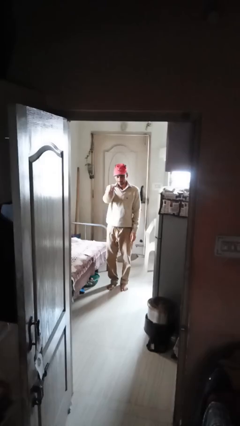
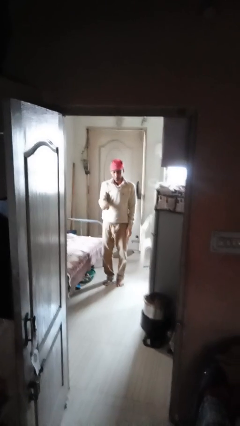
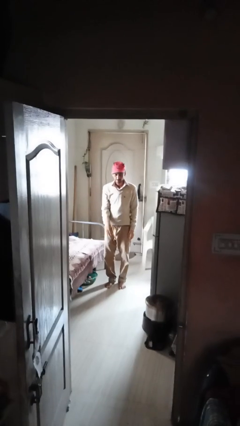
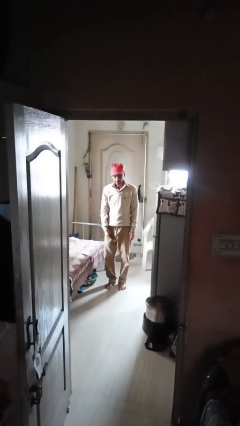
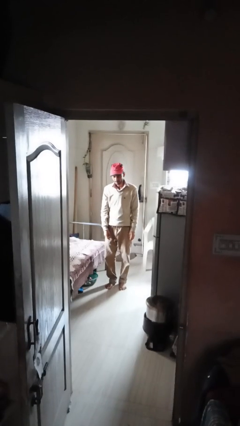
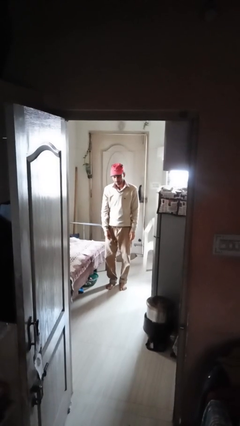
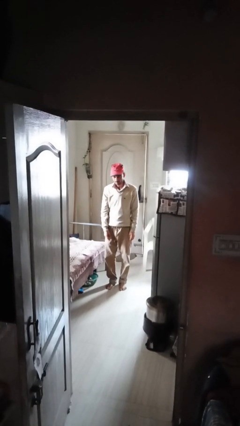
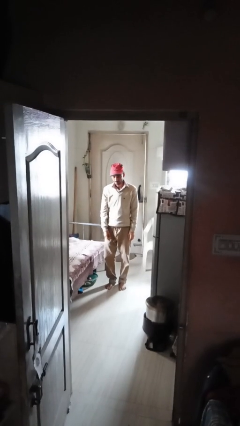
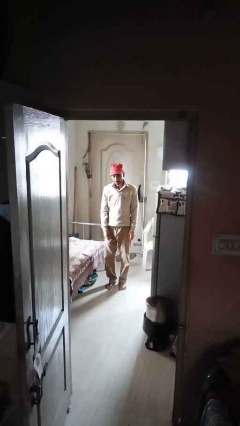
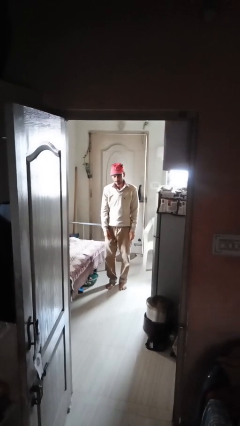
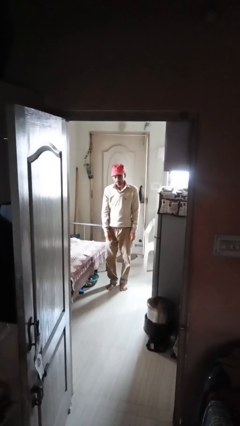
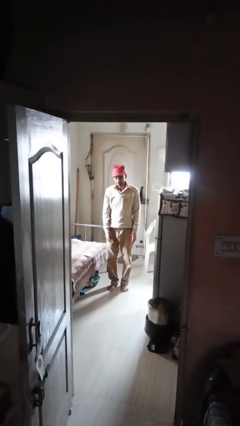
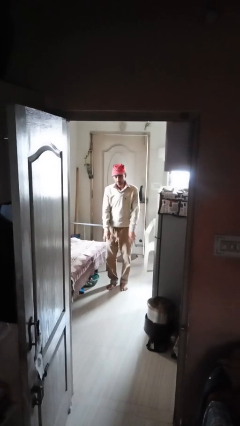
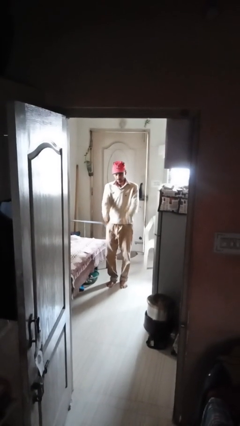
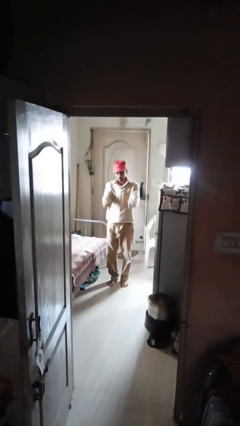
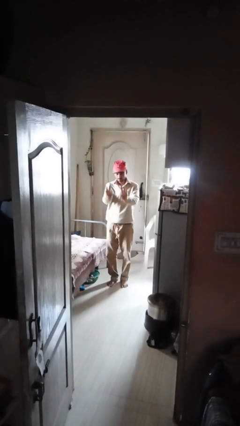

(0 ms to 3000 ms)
person gestures peace

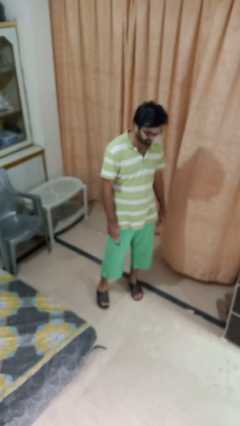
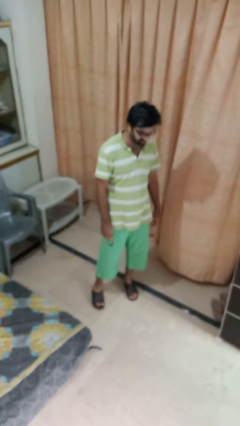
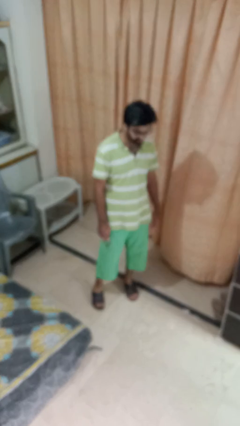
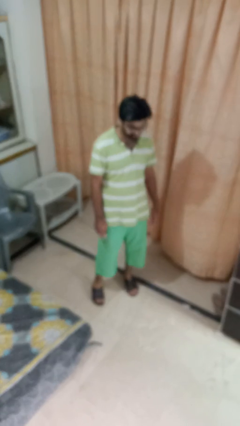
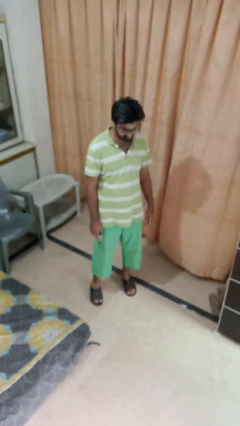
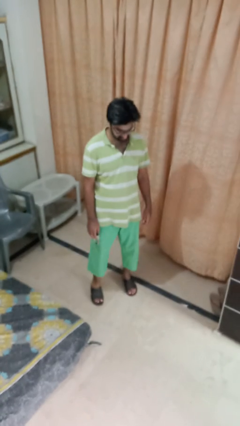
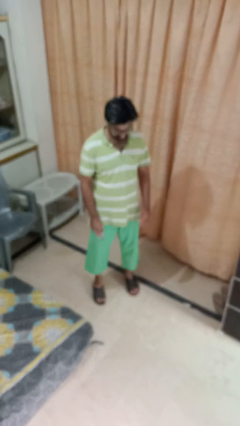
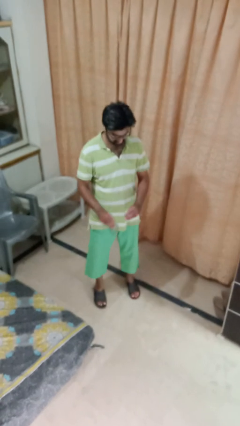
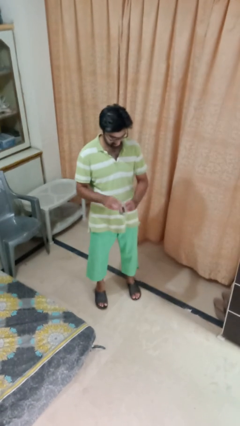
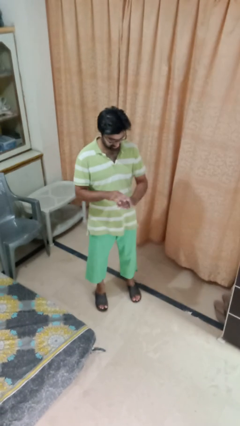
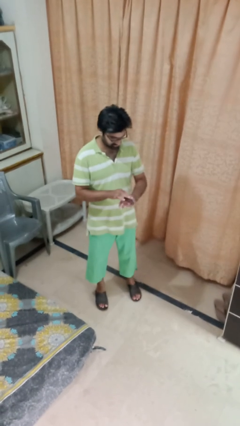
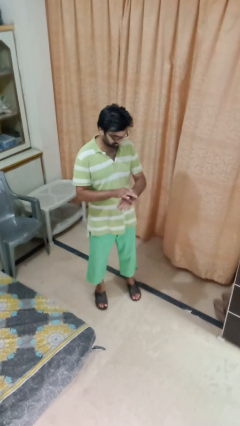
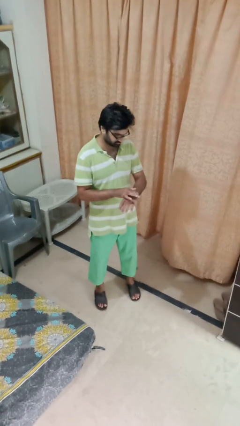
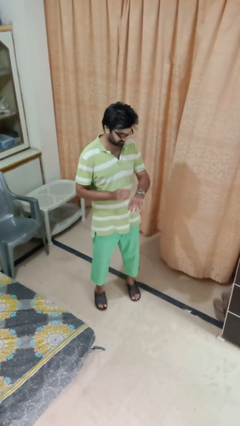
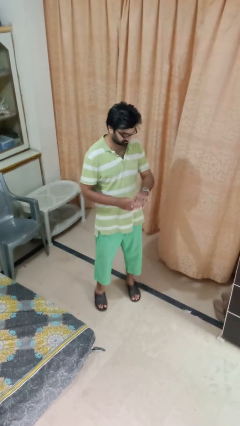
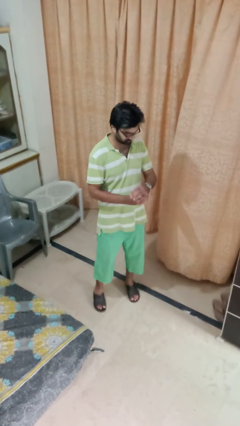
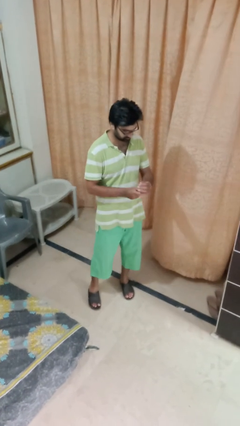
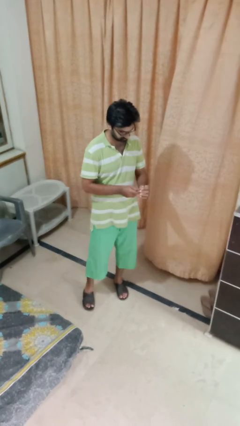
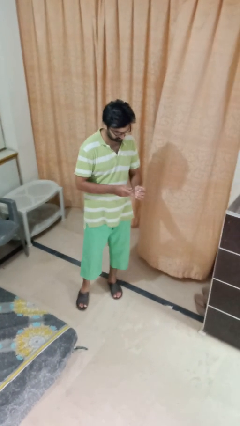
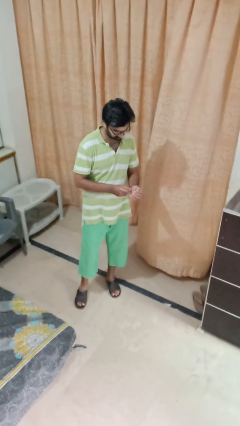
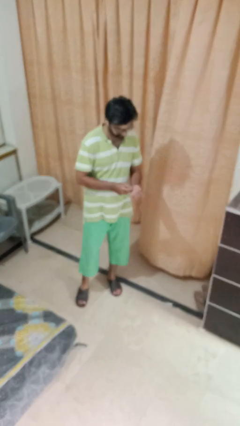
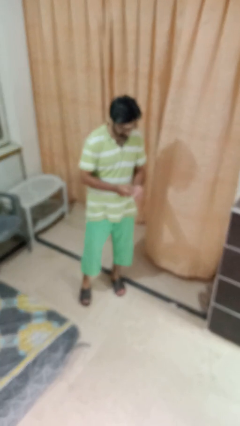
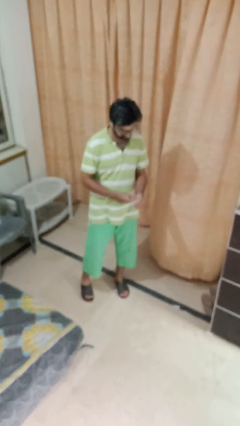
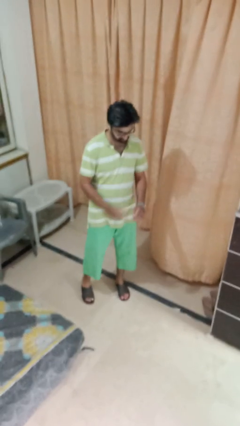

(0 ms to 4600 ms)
person puts on wristwatch

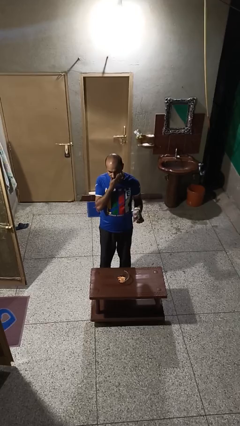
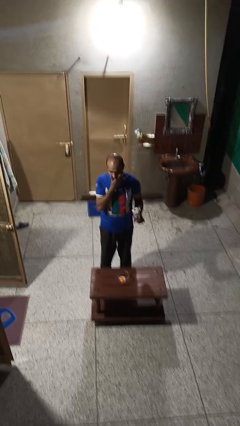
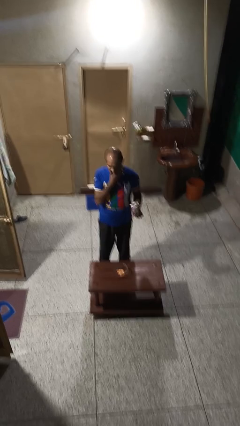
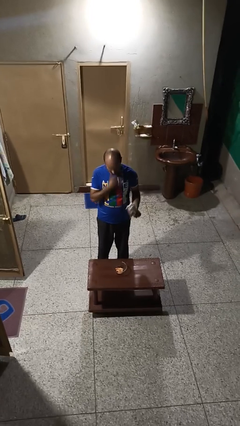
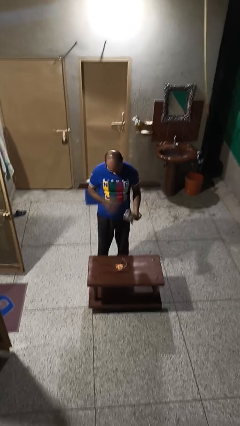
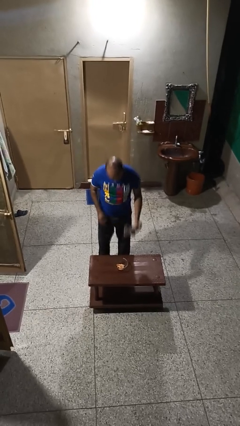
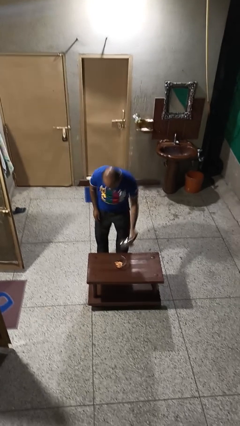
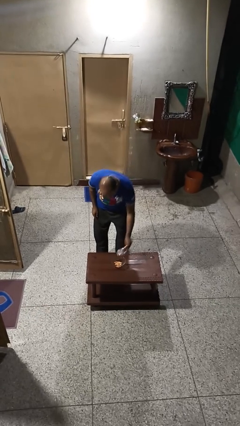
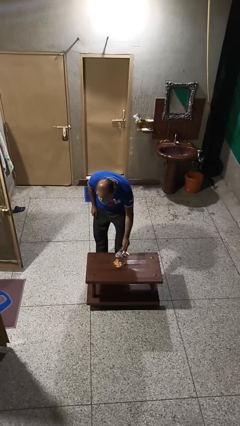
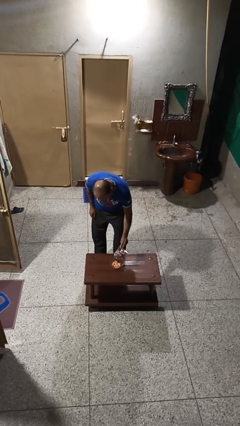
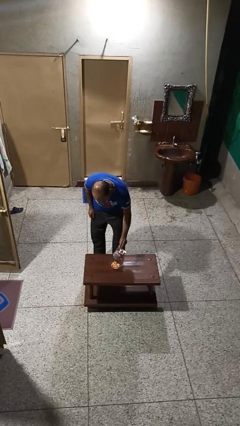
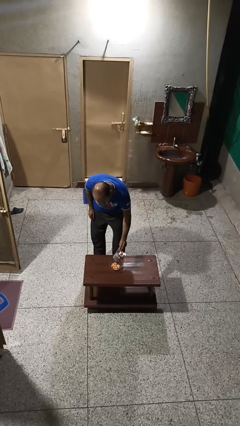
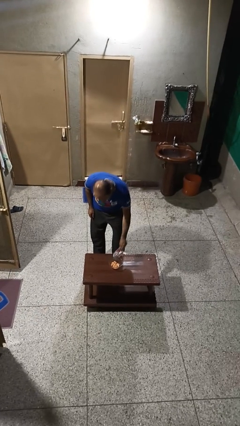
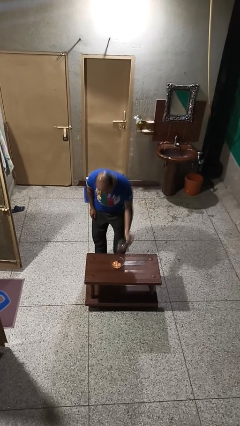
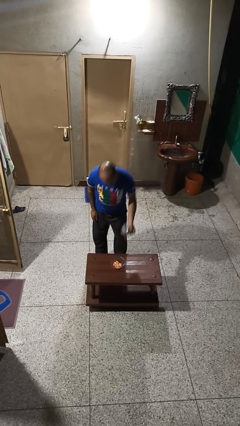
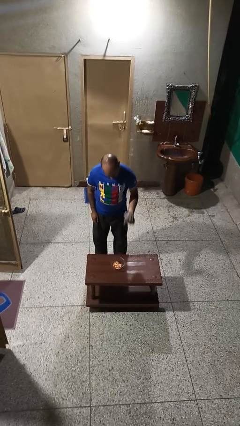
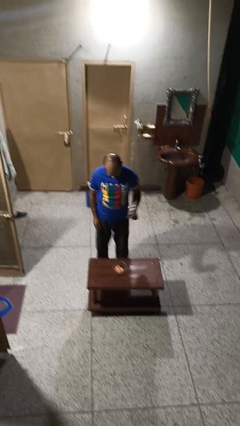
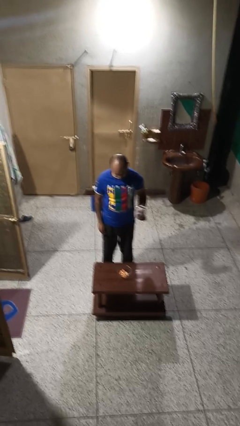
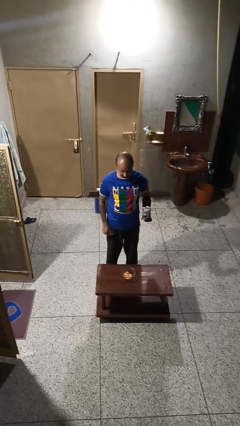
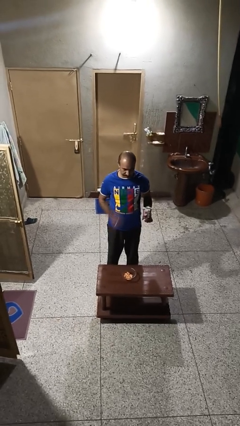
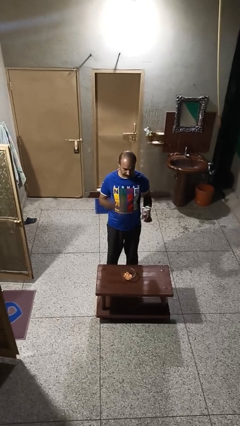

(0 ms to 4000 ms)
person pours into bowl

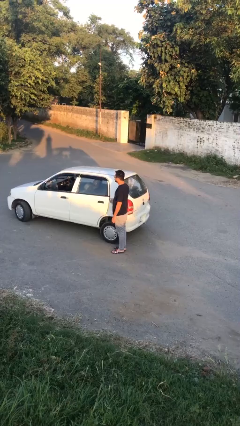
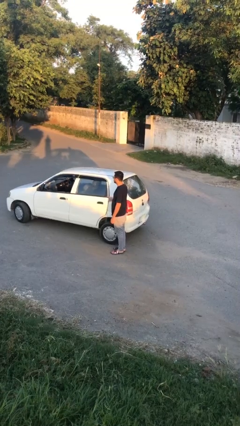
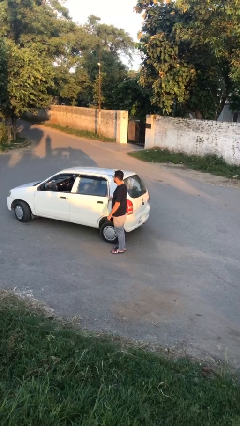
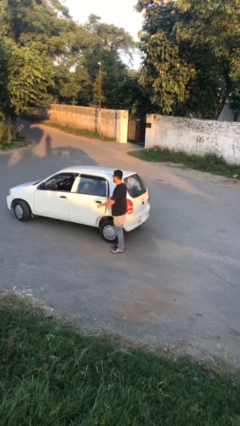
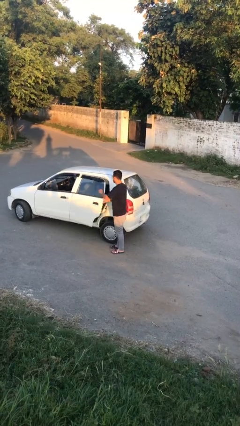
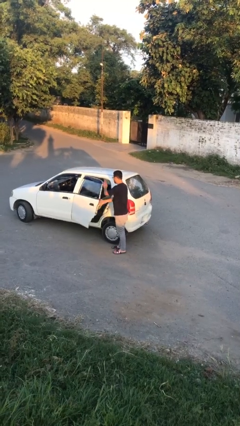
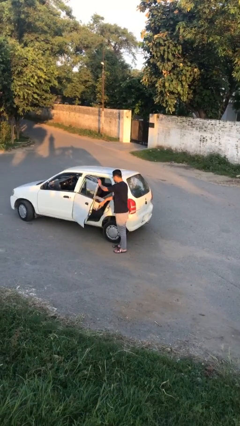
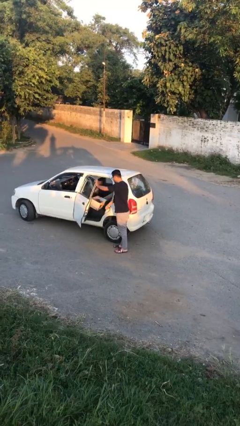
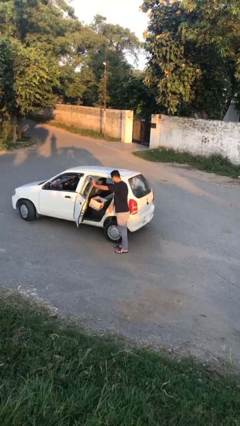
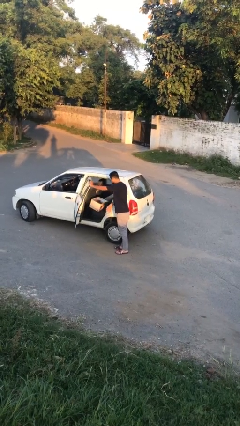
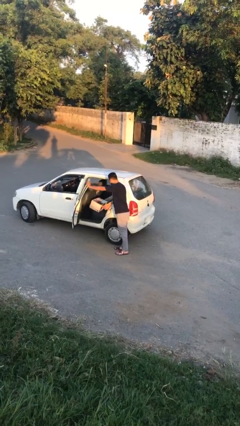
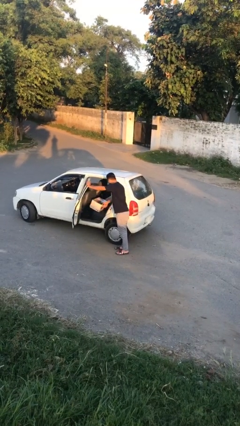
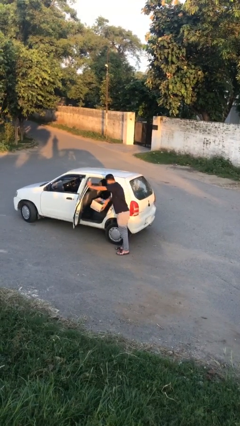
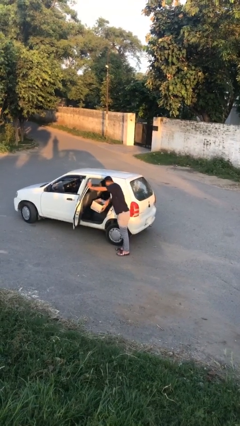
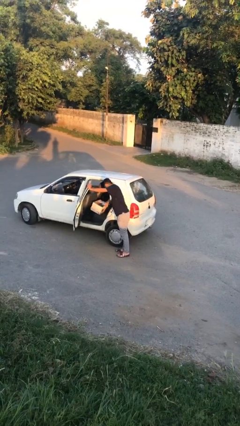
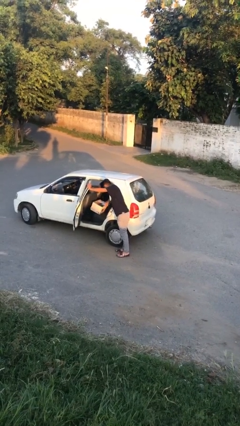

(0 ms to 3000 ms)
person opens car door

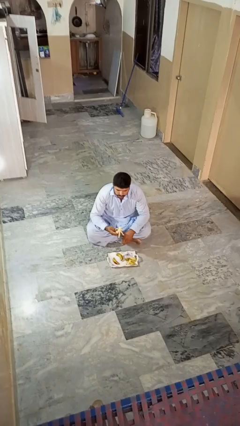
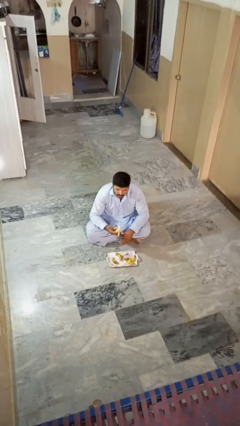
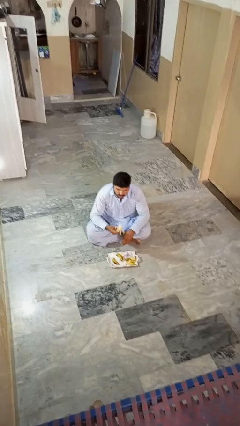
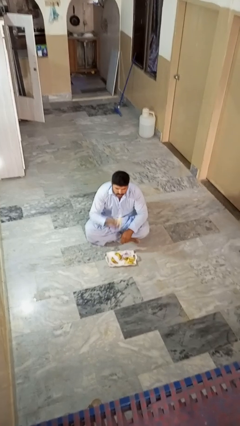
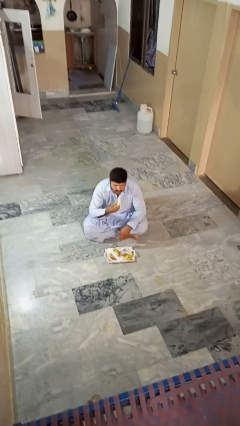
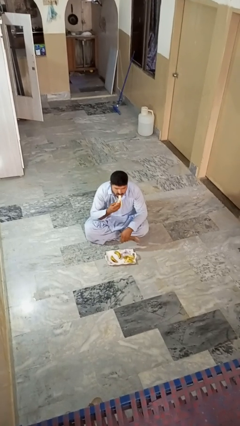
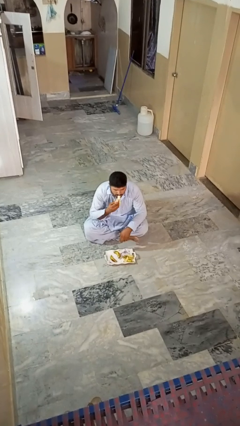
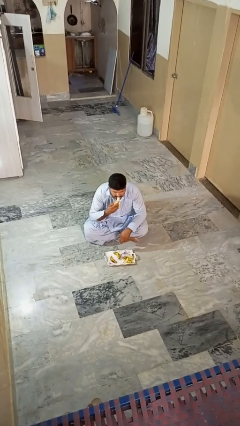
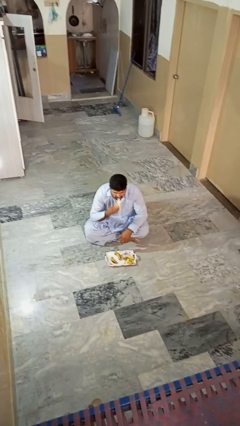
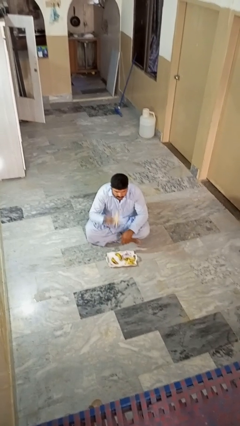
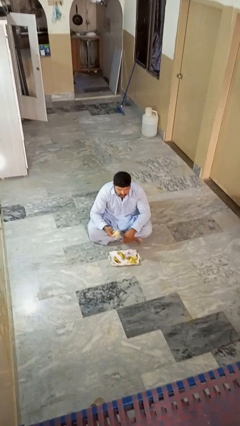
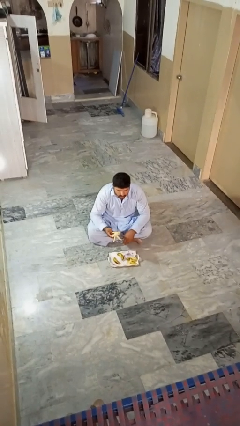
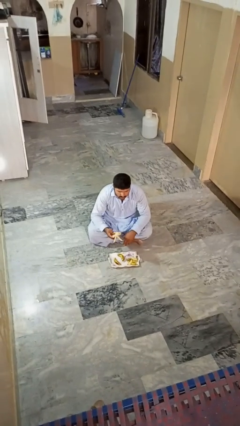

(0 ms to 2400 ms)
person eats banana

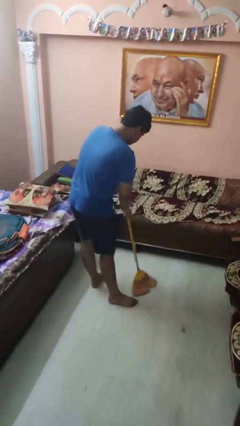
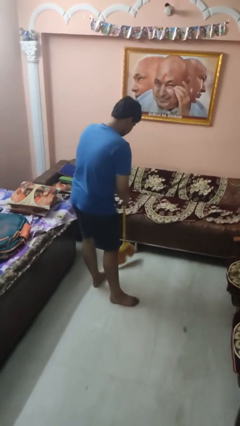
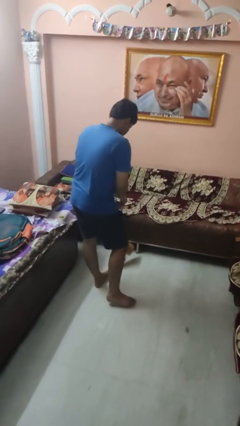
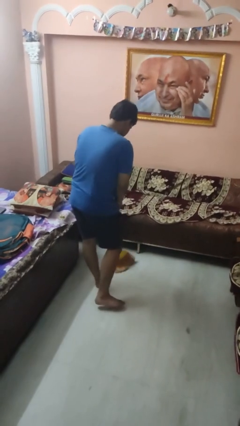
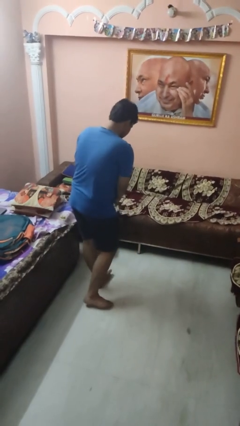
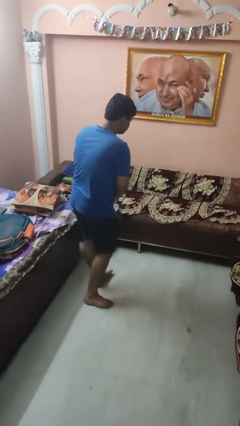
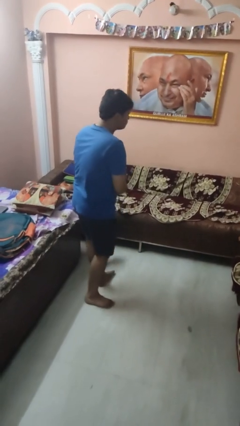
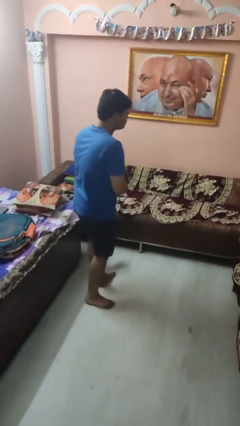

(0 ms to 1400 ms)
person sweeps floor
